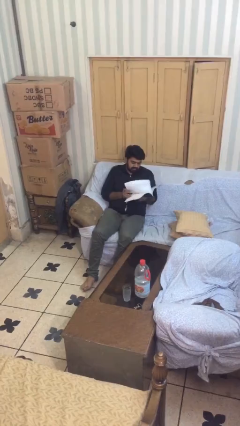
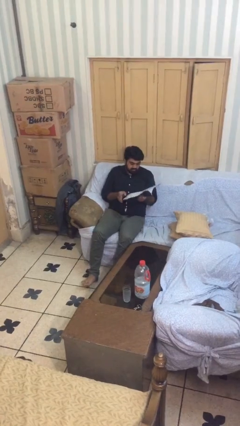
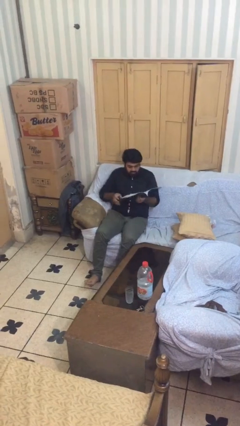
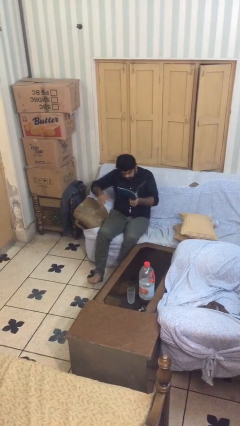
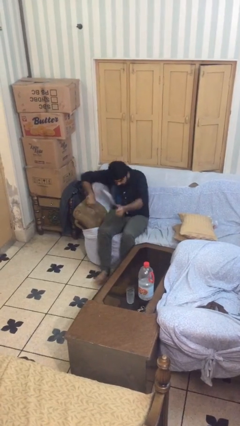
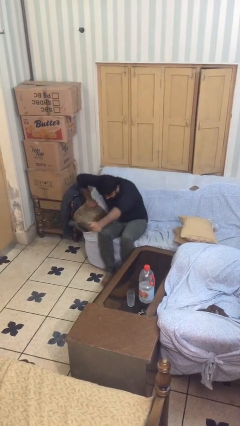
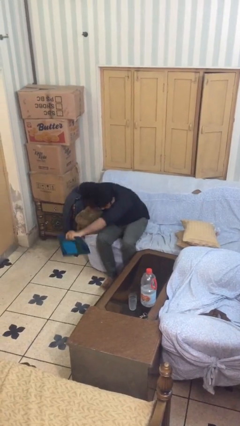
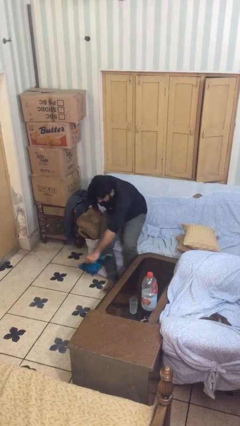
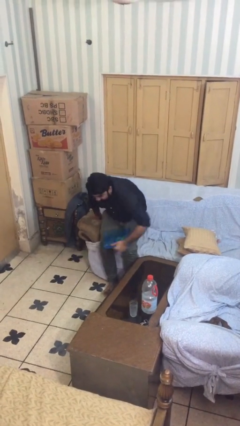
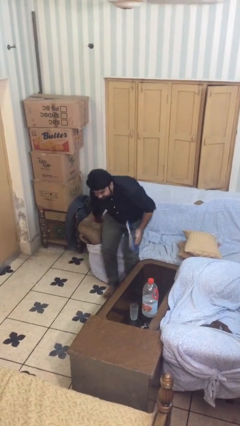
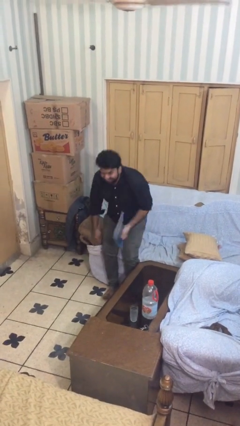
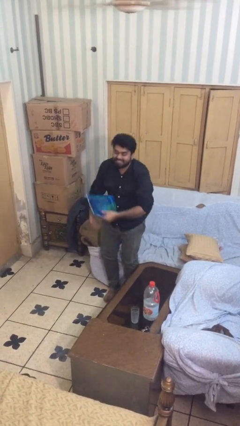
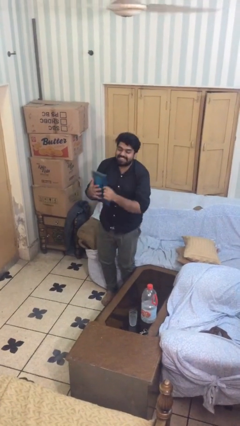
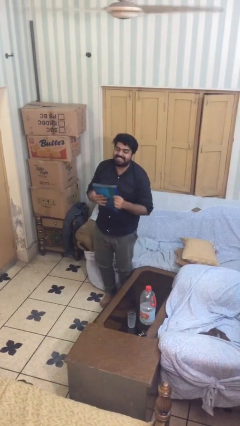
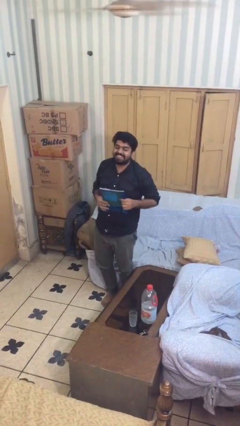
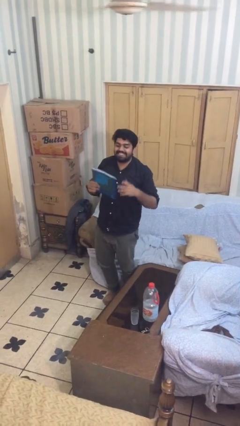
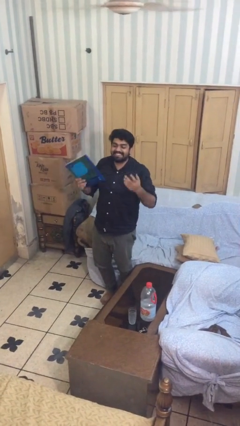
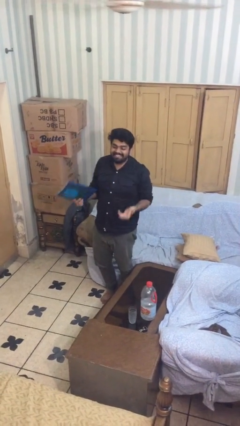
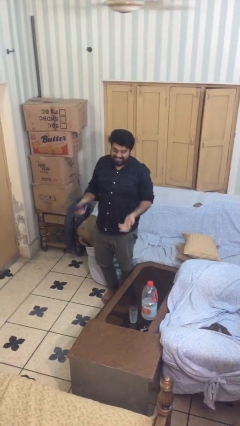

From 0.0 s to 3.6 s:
person stands up

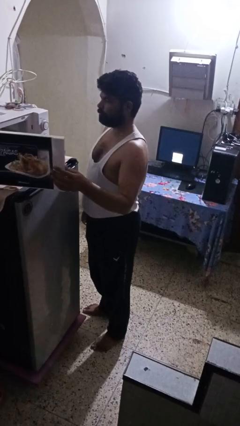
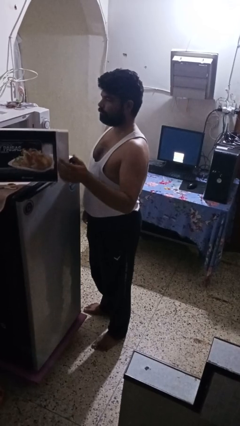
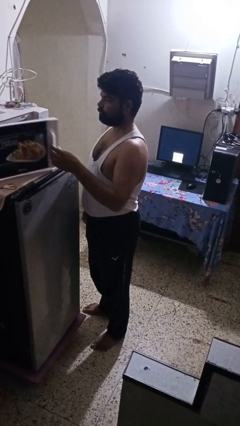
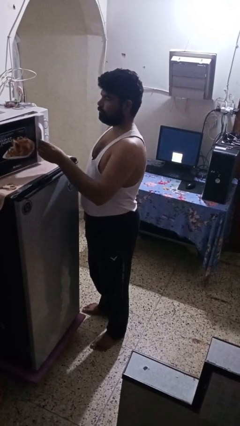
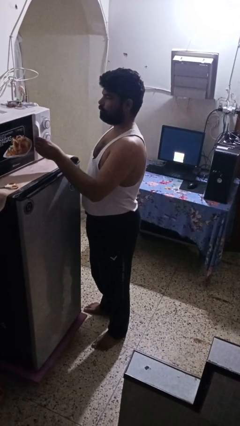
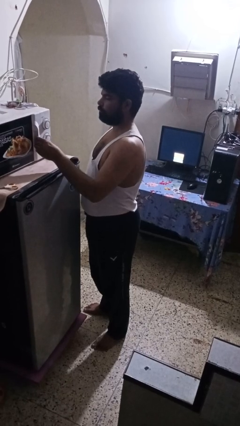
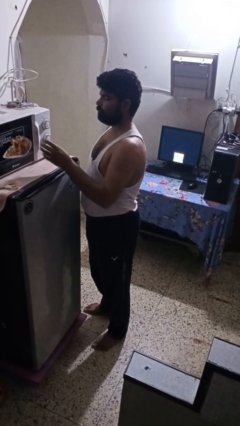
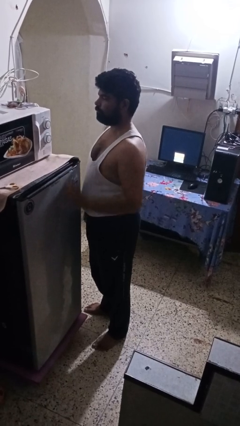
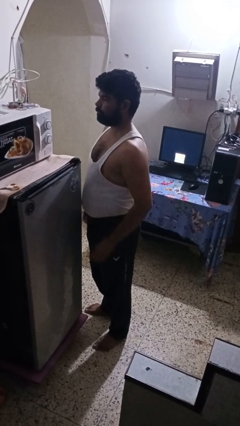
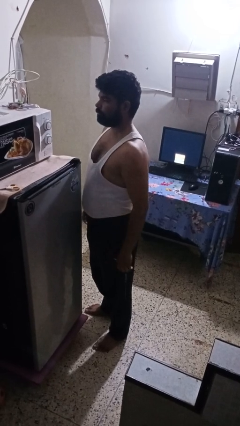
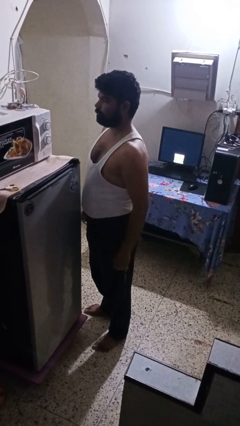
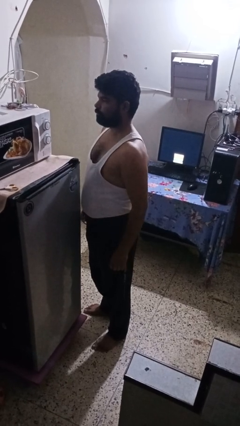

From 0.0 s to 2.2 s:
person closes microwave

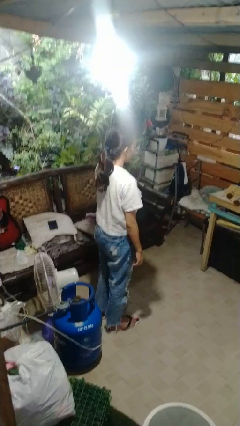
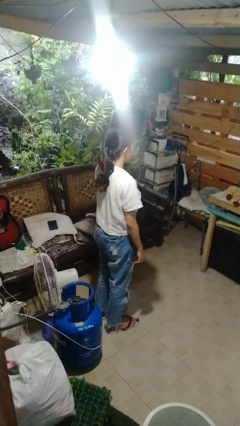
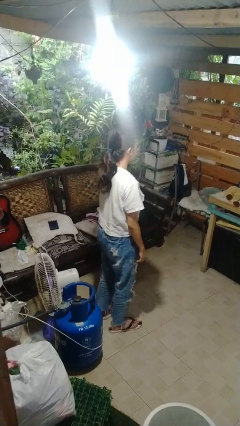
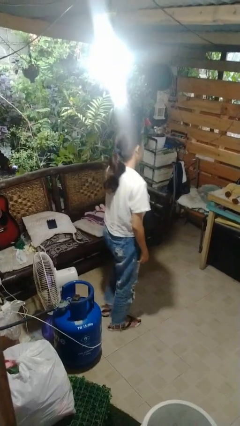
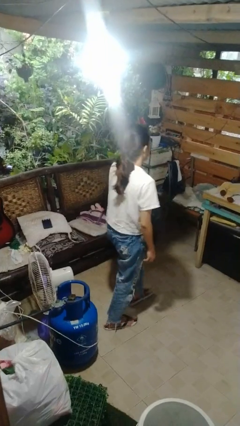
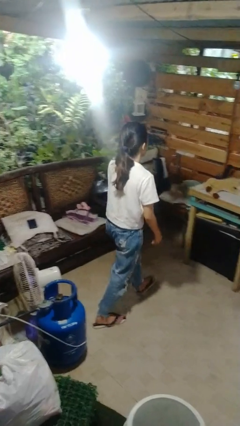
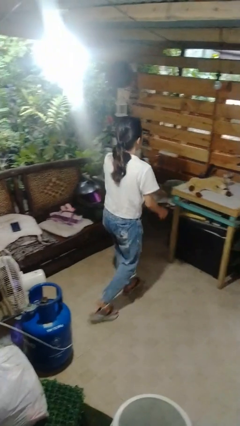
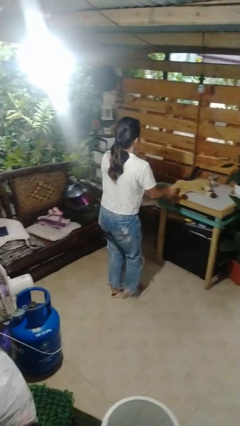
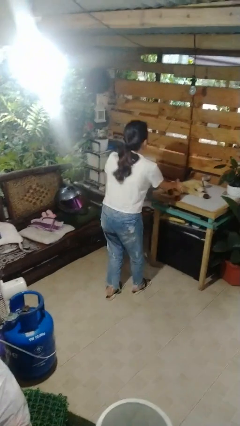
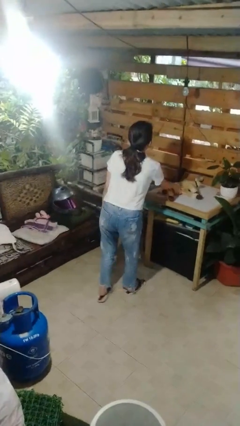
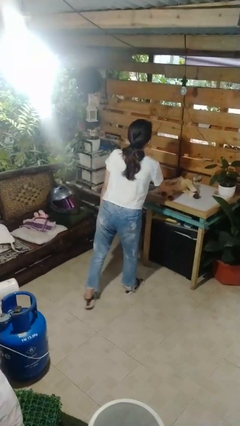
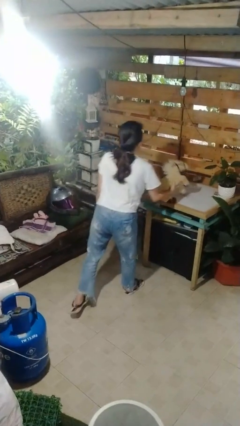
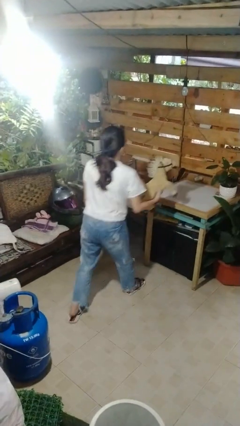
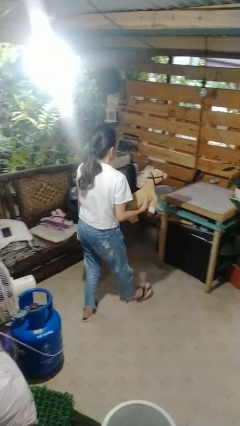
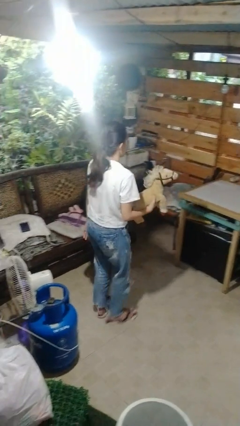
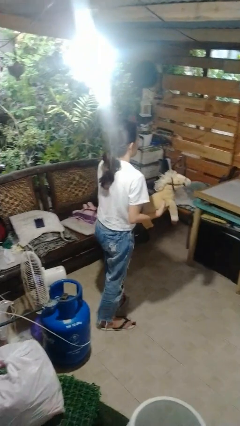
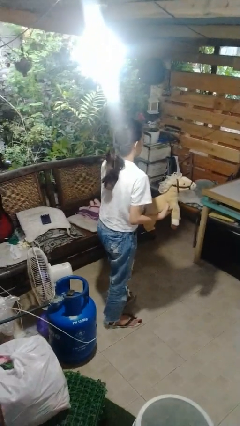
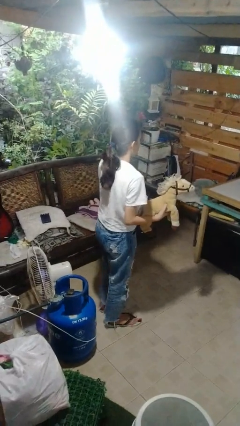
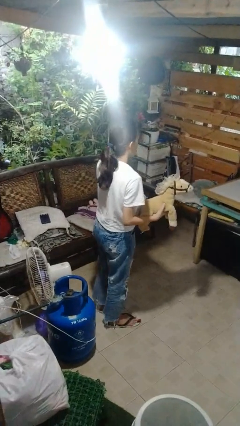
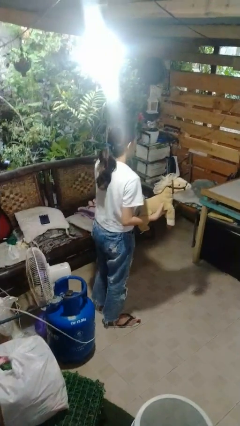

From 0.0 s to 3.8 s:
person picks up object from table

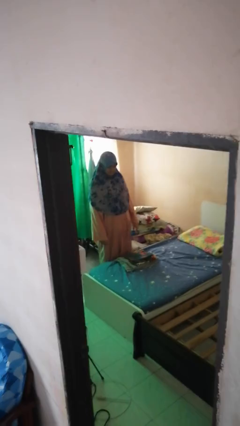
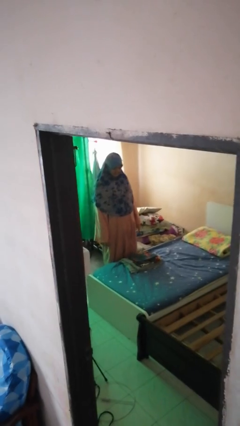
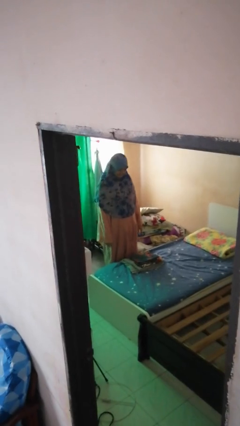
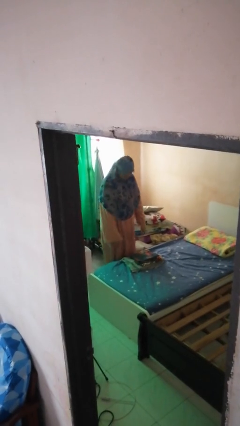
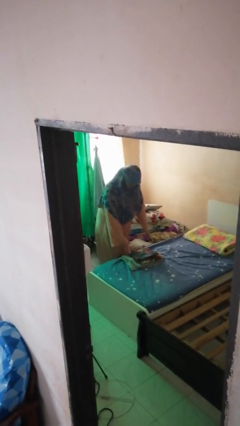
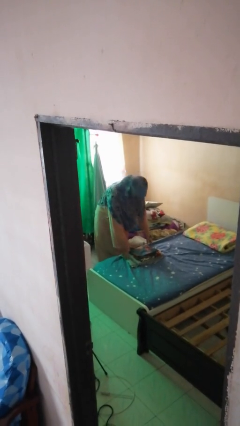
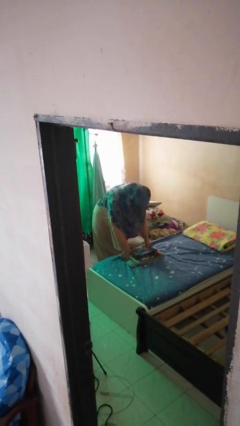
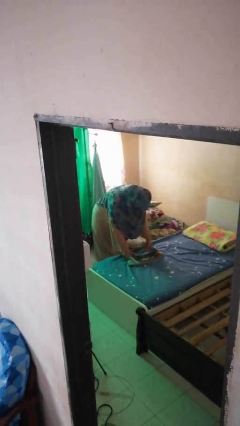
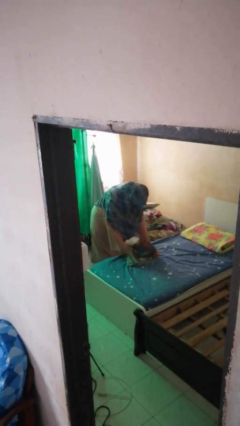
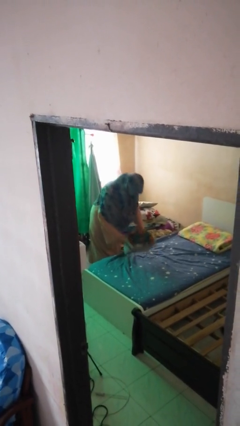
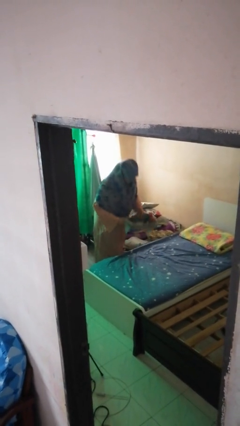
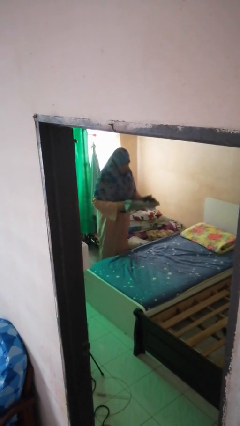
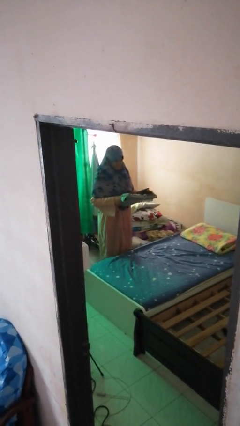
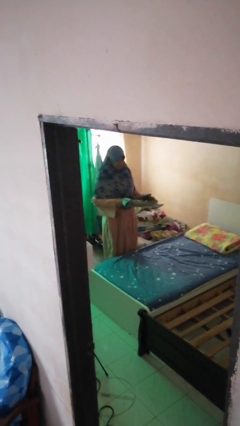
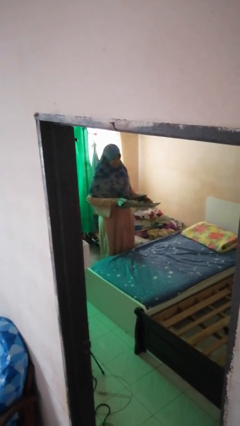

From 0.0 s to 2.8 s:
person picks up object from bed

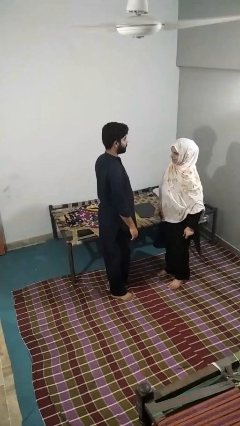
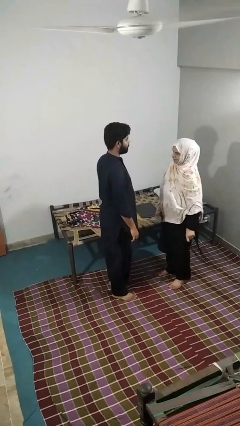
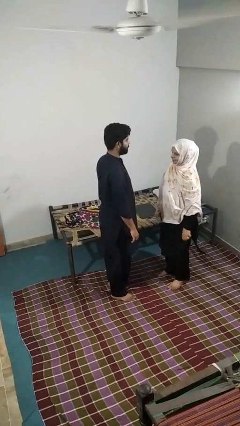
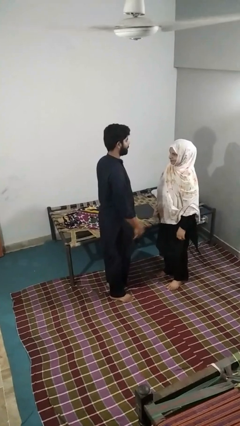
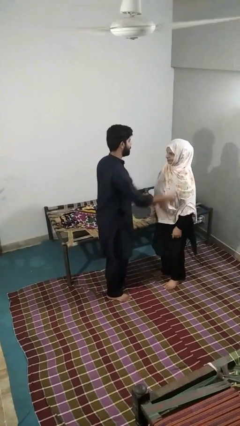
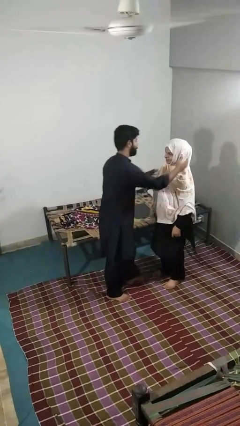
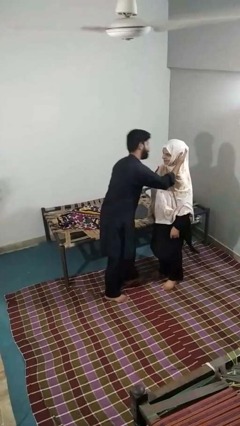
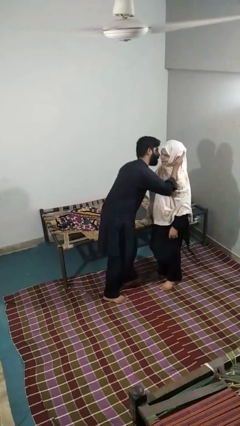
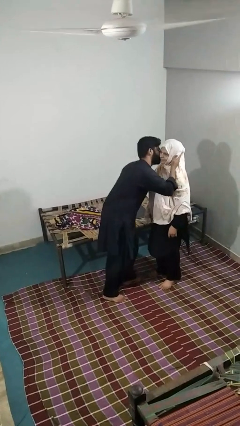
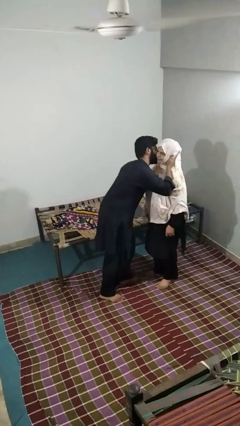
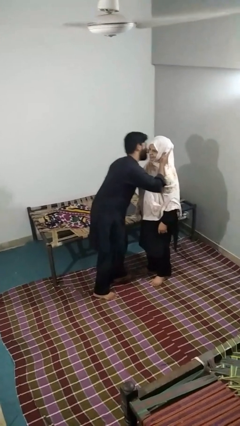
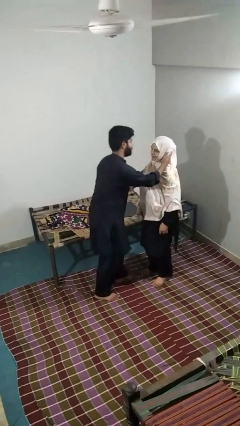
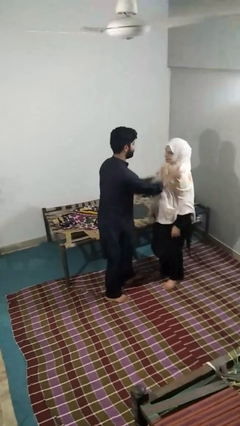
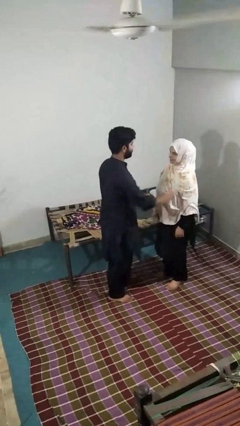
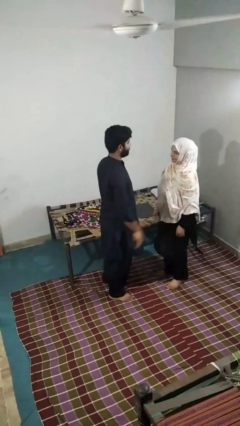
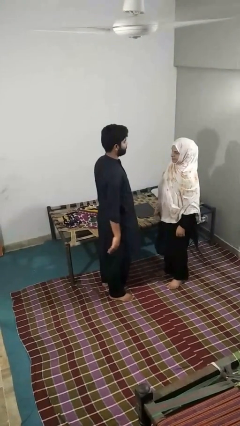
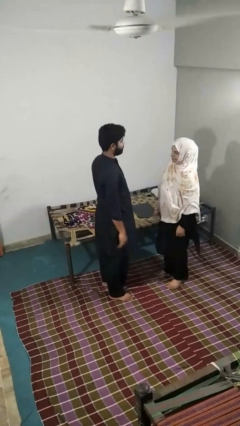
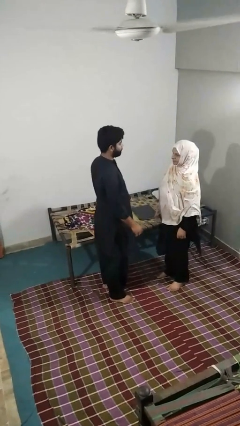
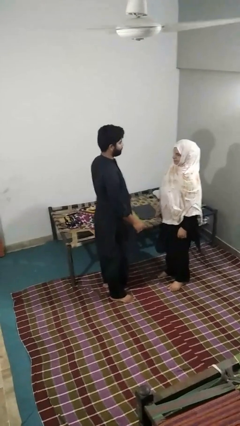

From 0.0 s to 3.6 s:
person kisses cheek of person

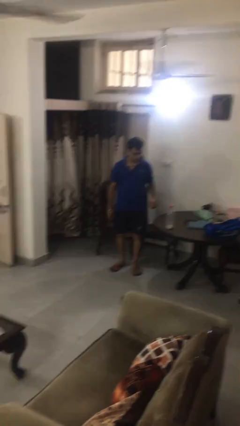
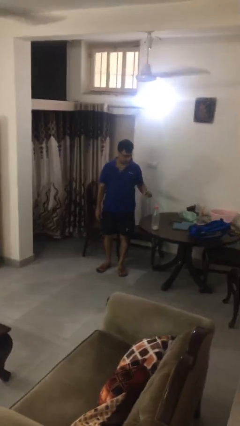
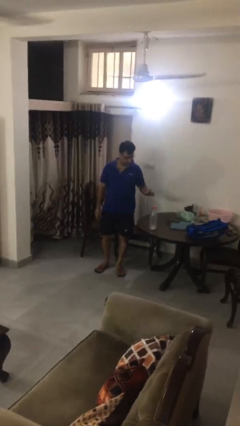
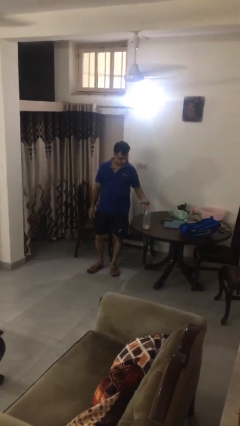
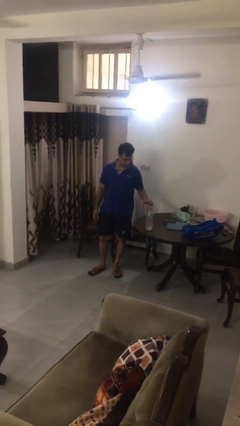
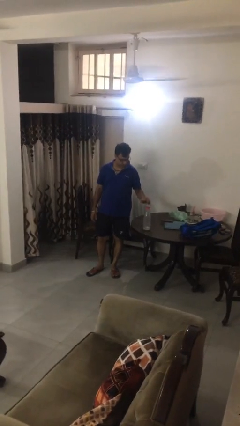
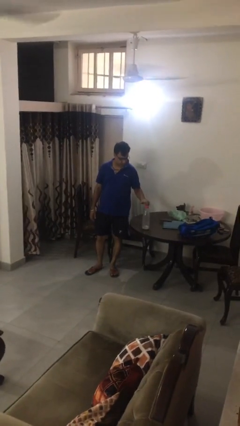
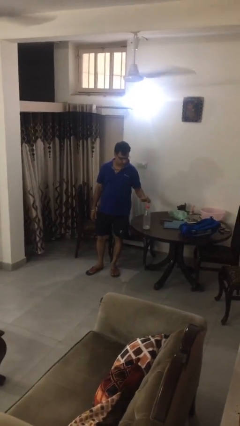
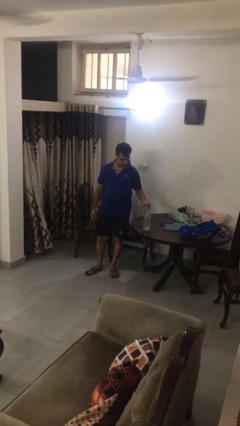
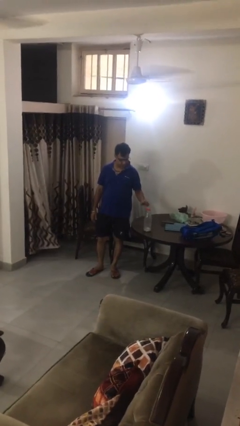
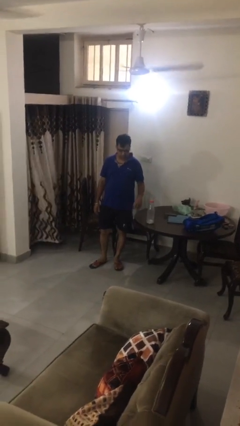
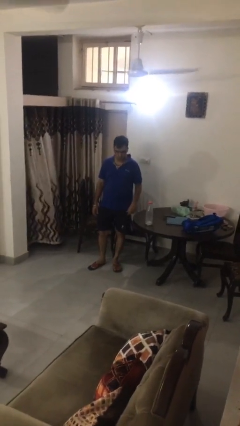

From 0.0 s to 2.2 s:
person taps object with finger
